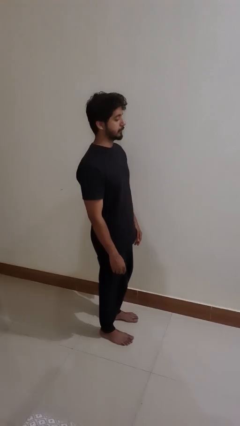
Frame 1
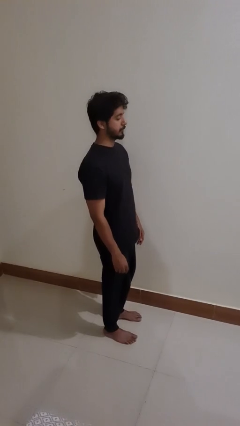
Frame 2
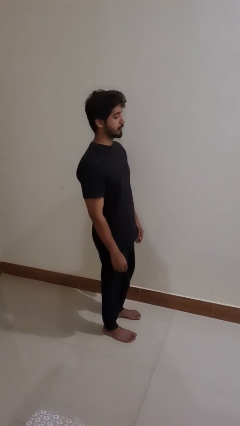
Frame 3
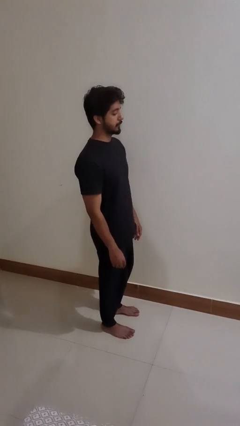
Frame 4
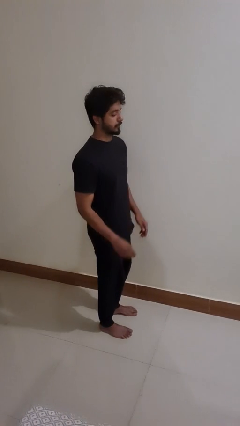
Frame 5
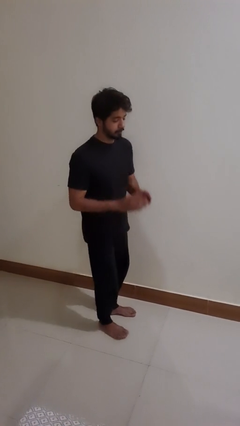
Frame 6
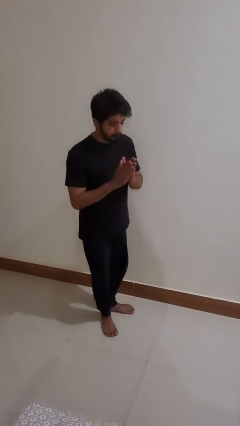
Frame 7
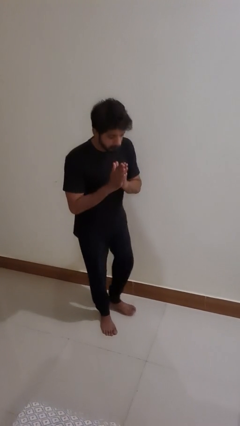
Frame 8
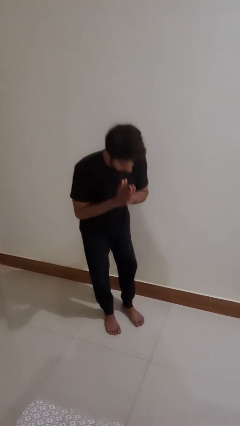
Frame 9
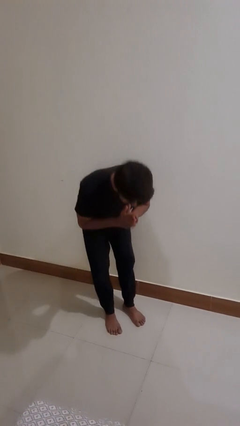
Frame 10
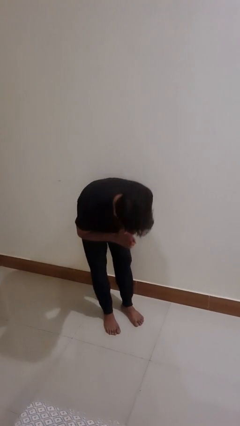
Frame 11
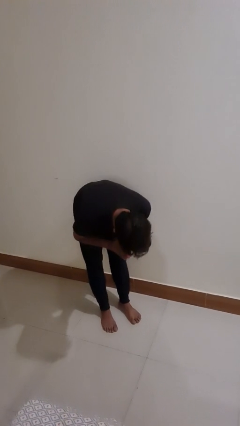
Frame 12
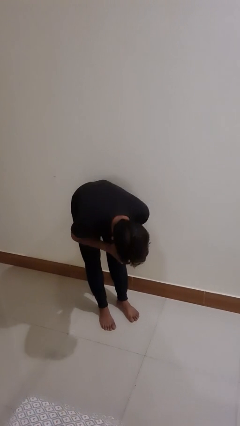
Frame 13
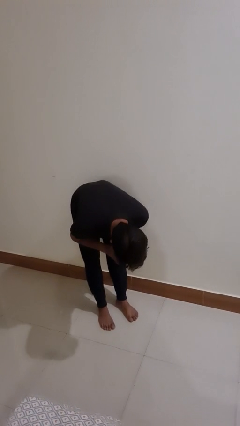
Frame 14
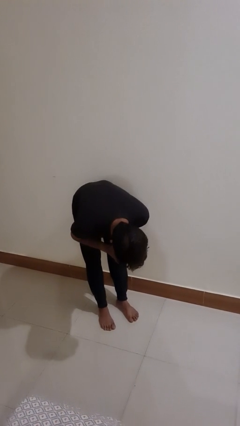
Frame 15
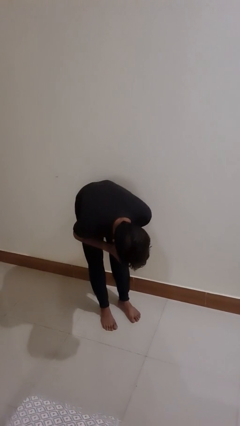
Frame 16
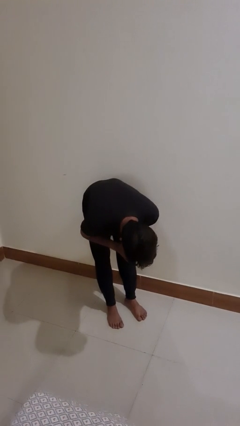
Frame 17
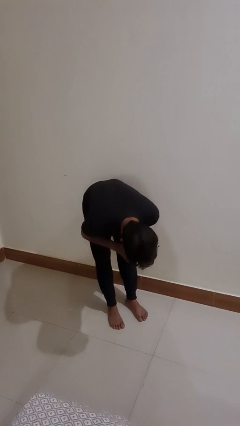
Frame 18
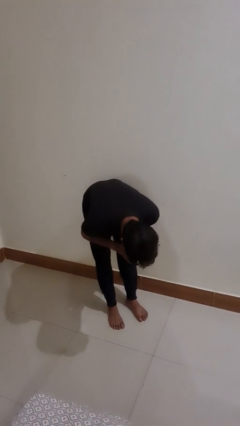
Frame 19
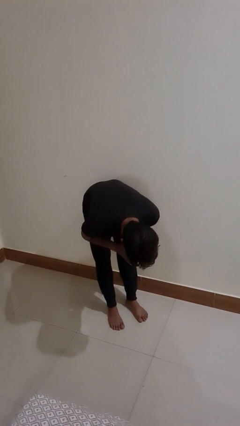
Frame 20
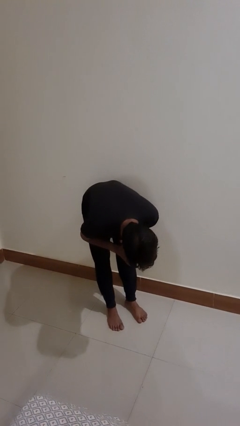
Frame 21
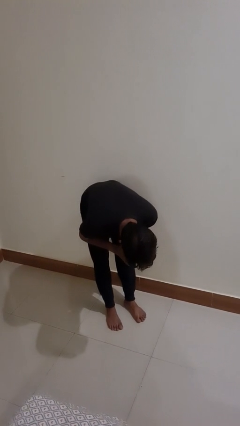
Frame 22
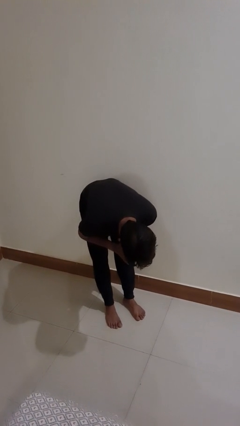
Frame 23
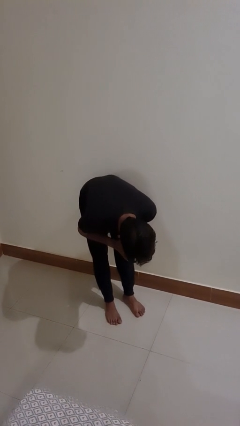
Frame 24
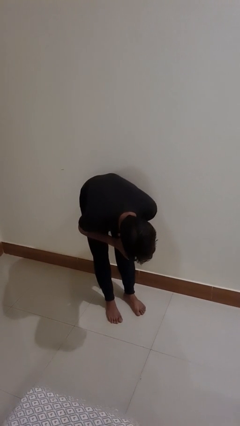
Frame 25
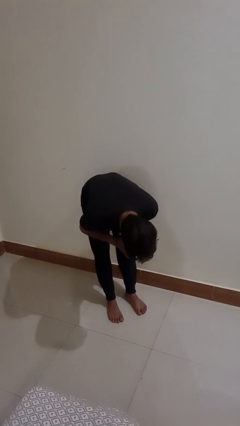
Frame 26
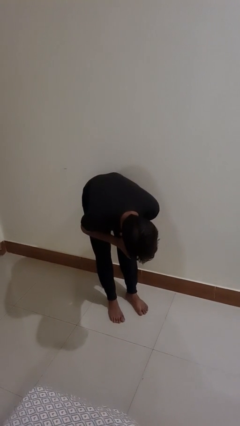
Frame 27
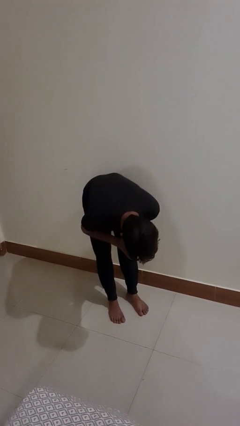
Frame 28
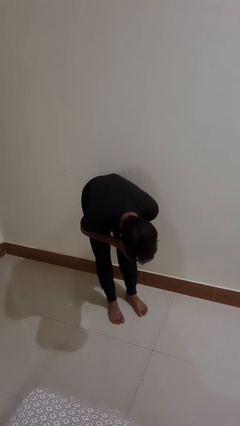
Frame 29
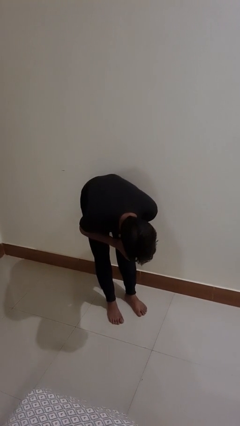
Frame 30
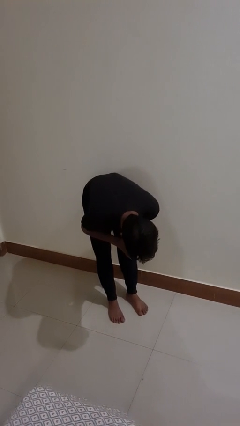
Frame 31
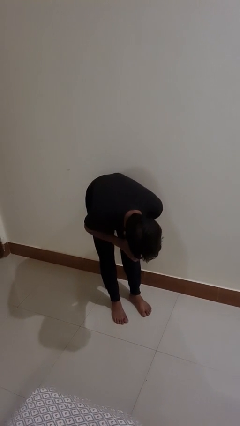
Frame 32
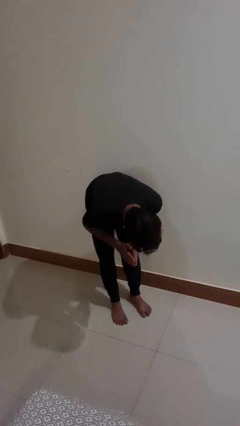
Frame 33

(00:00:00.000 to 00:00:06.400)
person bows

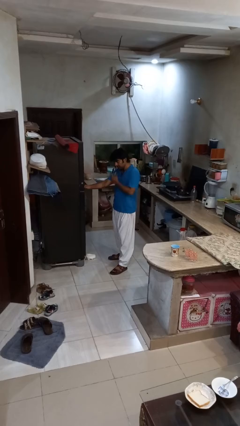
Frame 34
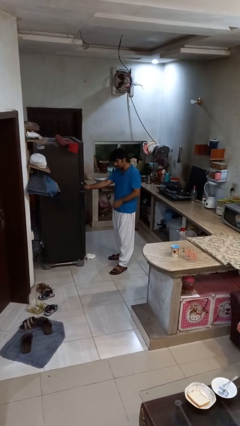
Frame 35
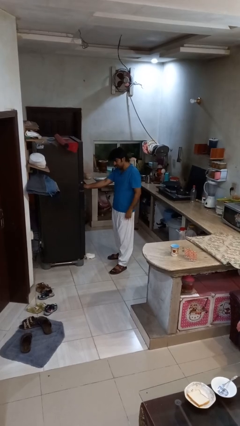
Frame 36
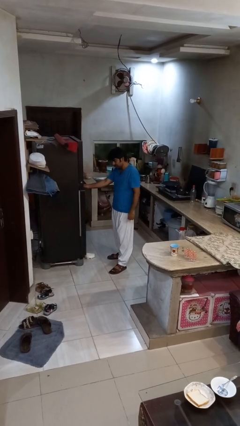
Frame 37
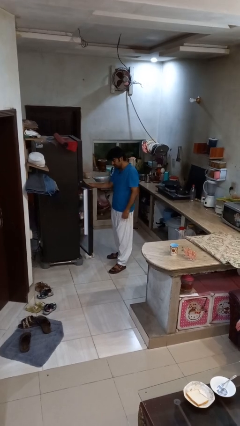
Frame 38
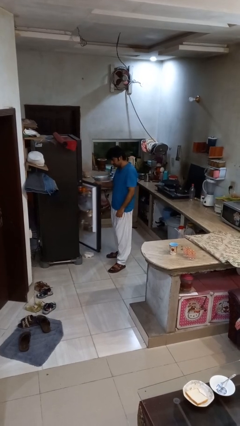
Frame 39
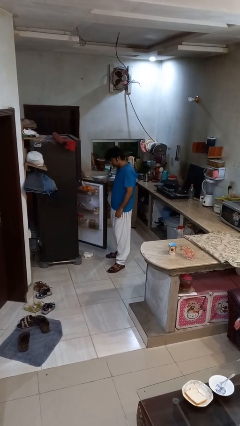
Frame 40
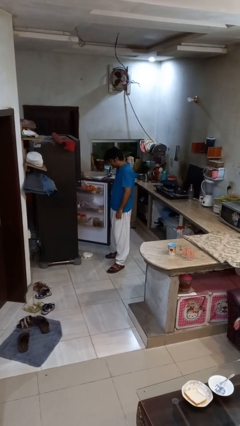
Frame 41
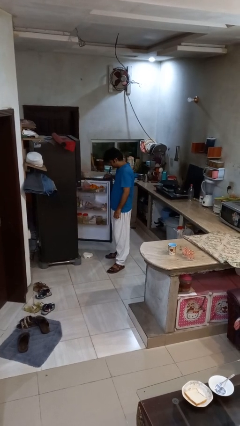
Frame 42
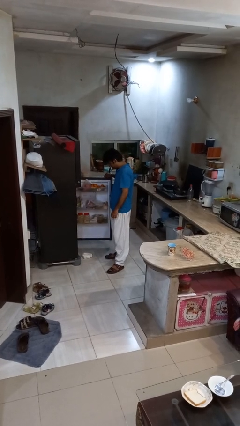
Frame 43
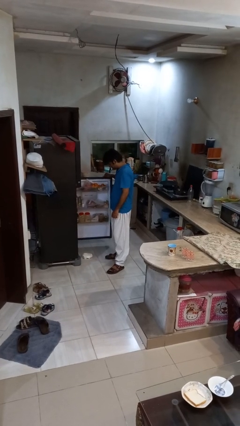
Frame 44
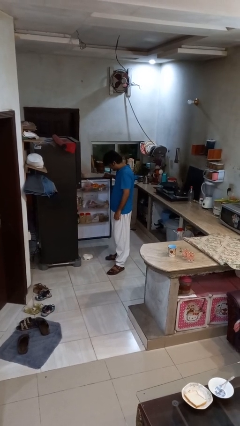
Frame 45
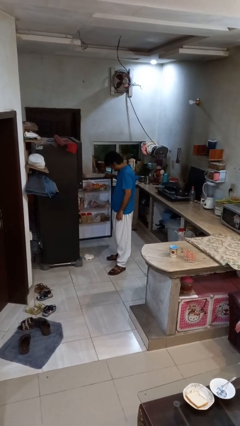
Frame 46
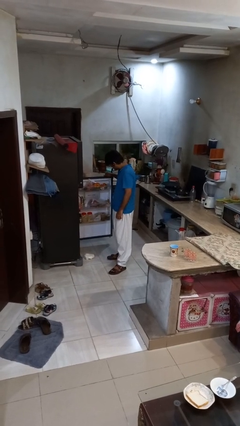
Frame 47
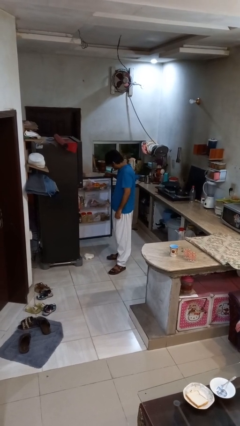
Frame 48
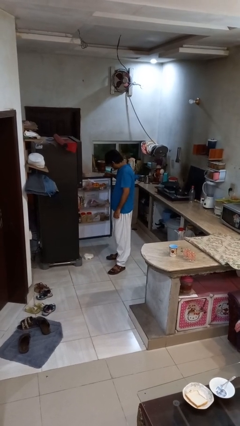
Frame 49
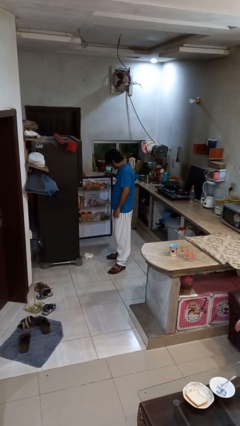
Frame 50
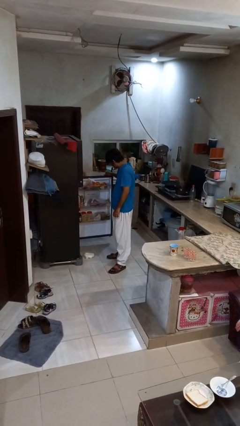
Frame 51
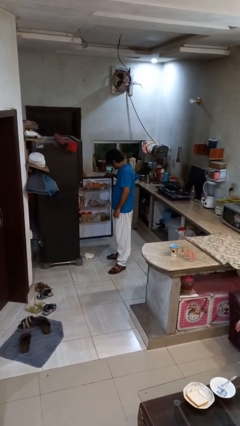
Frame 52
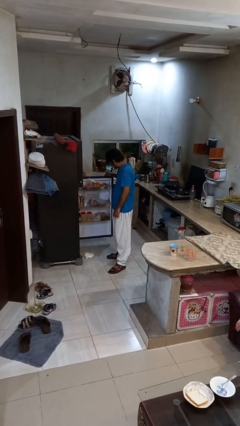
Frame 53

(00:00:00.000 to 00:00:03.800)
person opens refrigerator

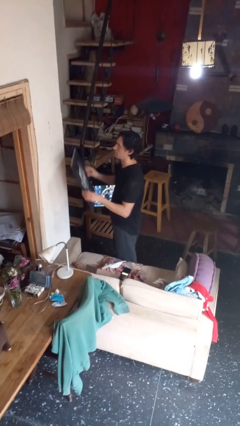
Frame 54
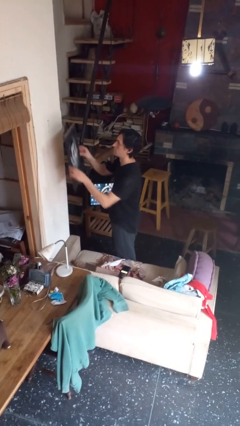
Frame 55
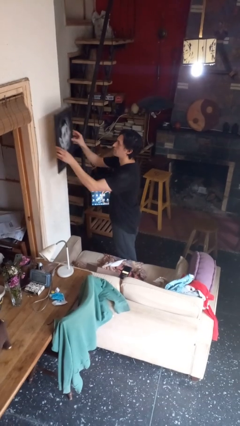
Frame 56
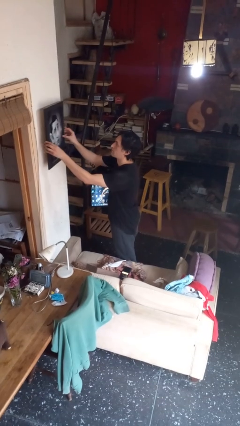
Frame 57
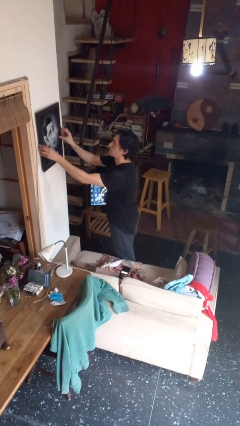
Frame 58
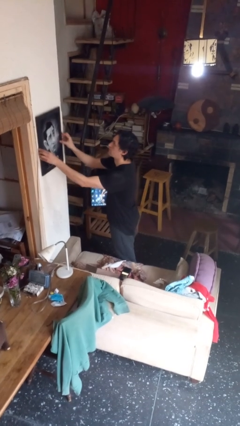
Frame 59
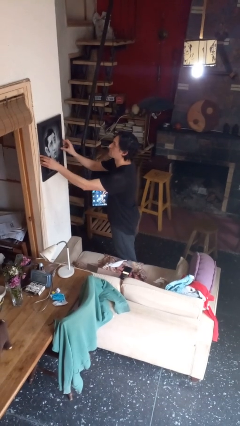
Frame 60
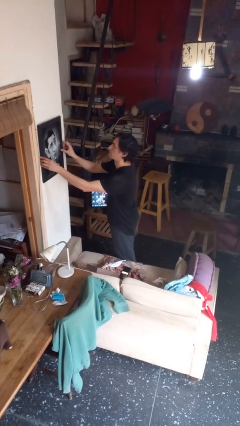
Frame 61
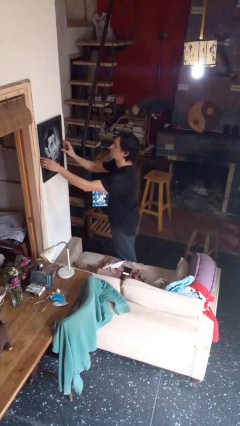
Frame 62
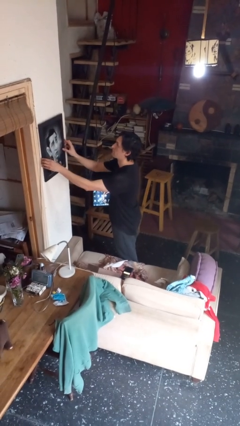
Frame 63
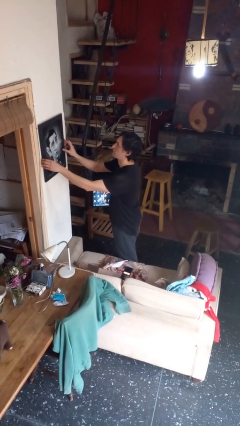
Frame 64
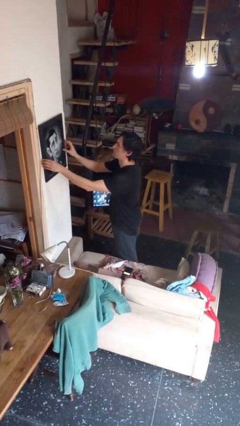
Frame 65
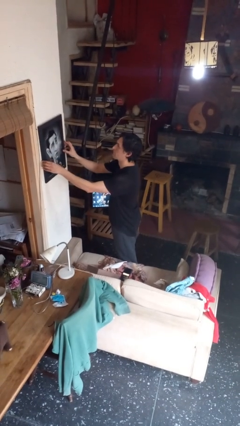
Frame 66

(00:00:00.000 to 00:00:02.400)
person puts up picture frame

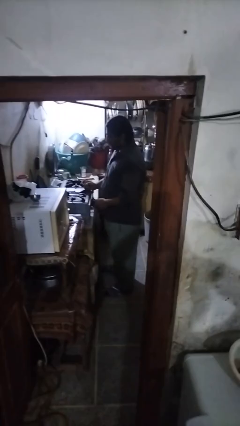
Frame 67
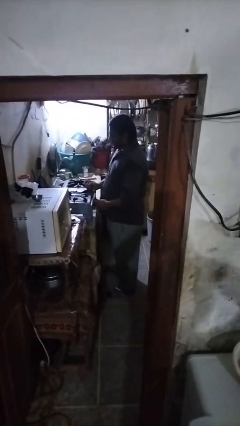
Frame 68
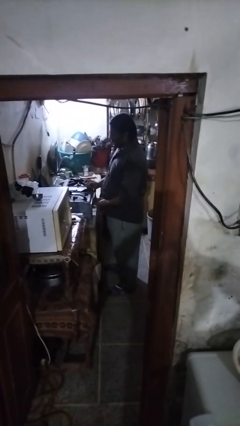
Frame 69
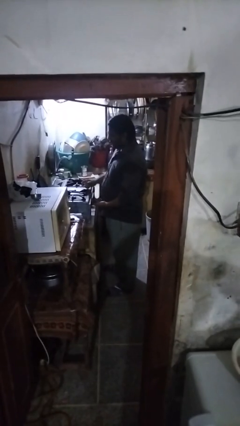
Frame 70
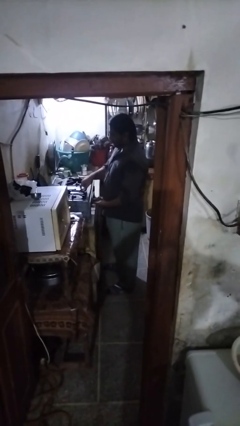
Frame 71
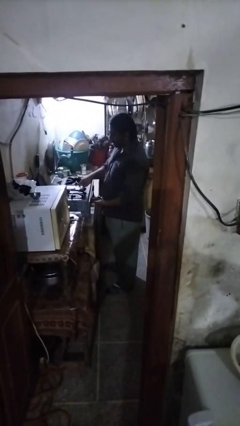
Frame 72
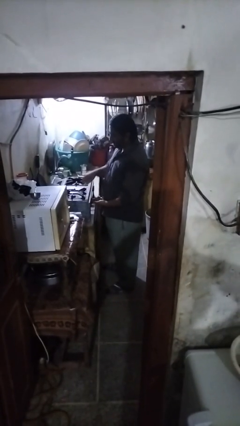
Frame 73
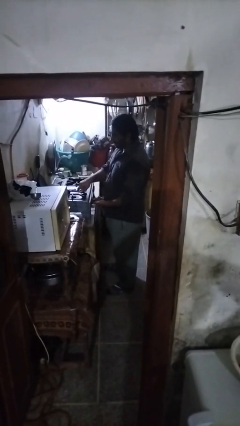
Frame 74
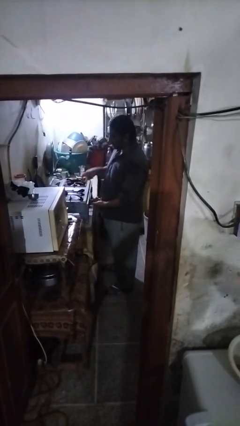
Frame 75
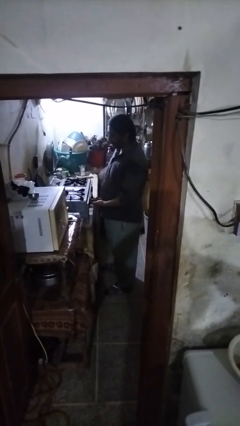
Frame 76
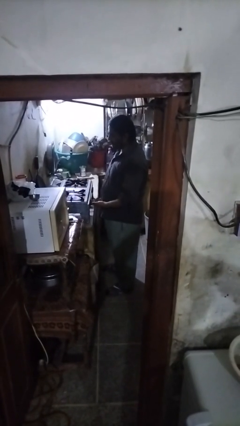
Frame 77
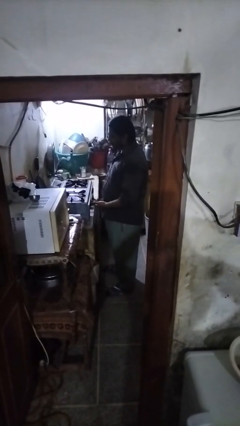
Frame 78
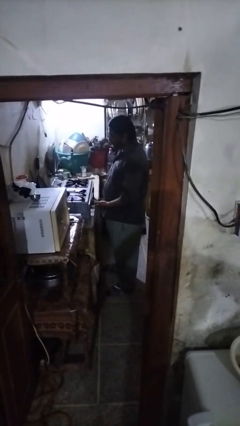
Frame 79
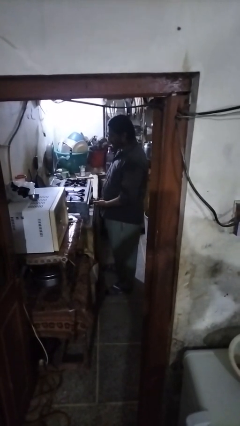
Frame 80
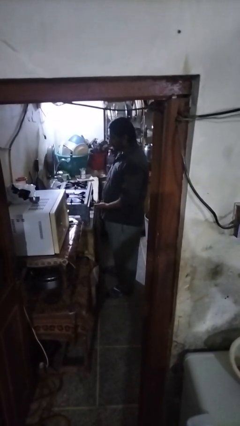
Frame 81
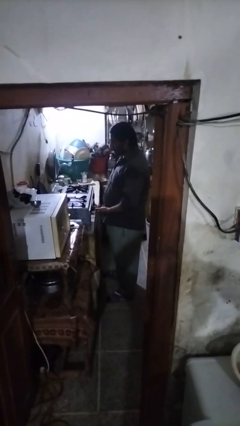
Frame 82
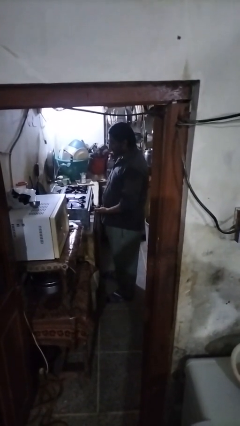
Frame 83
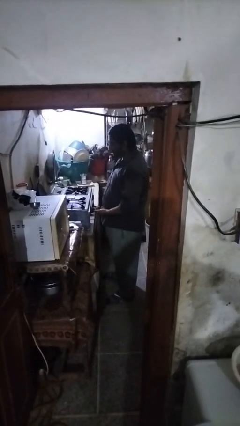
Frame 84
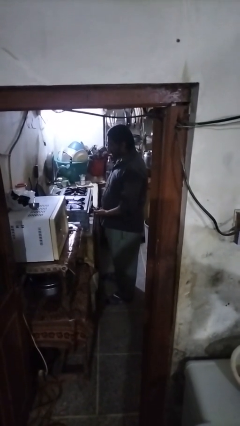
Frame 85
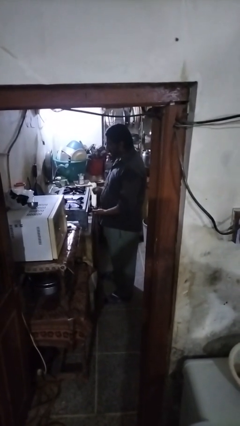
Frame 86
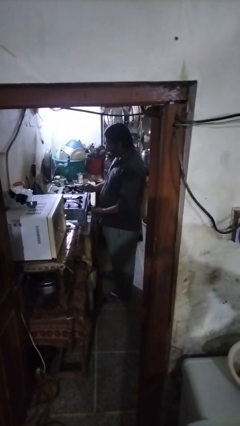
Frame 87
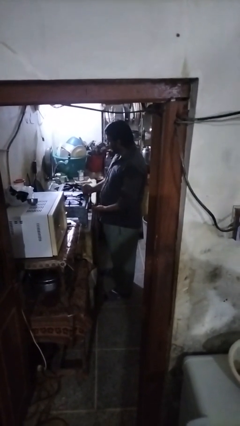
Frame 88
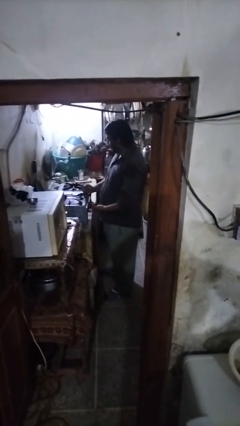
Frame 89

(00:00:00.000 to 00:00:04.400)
person turns on stovetop

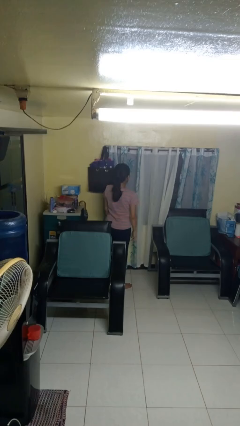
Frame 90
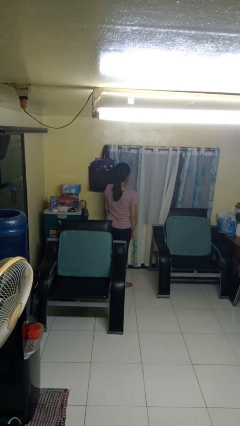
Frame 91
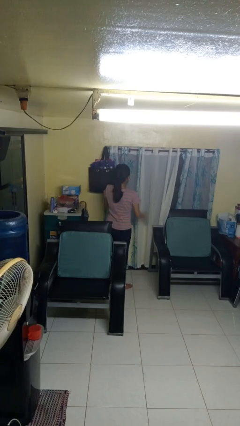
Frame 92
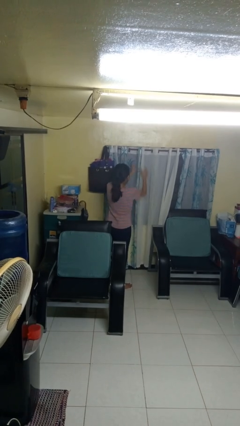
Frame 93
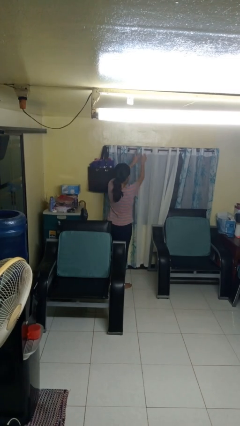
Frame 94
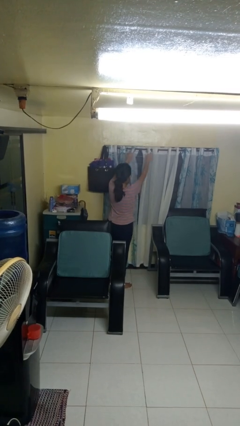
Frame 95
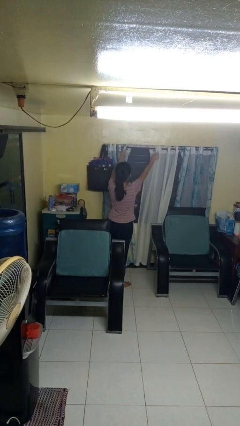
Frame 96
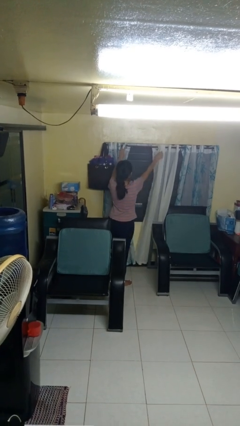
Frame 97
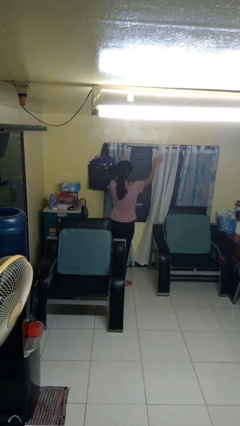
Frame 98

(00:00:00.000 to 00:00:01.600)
person opens curtains
